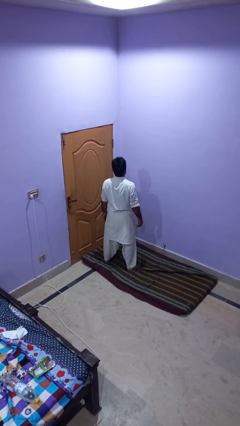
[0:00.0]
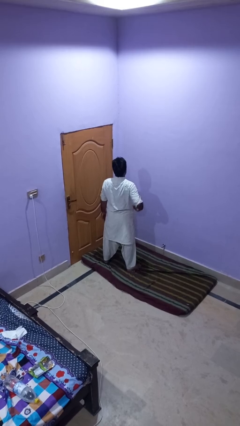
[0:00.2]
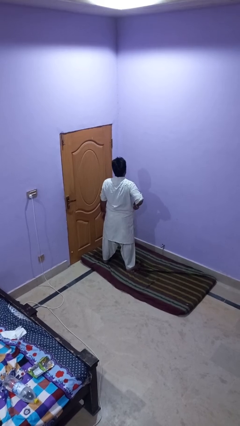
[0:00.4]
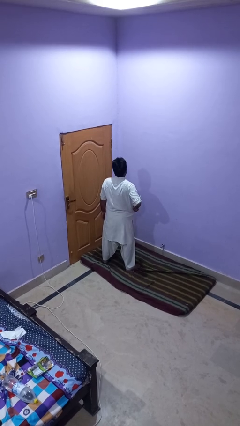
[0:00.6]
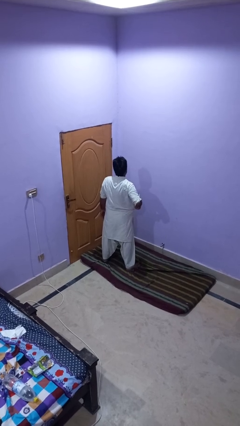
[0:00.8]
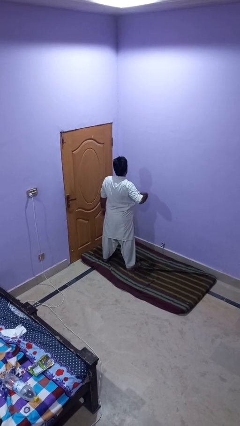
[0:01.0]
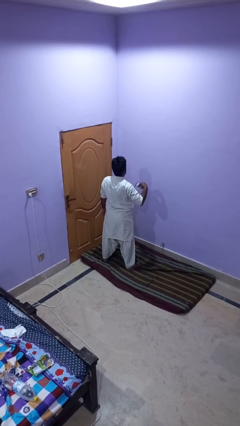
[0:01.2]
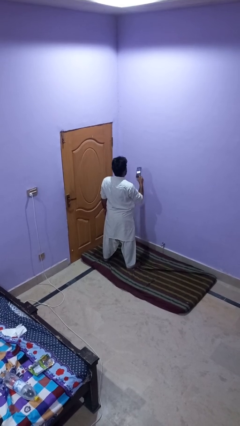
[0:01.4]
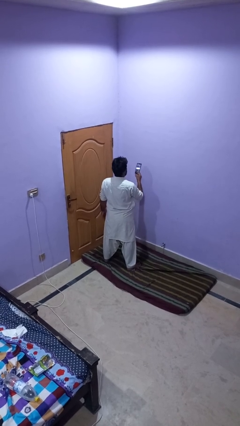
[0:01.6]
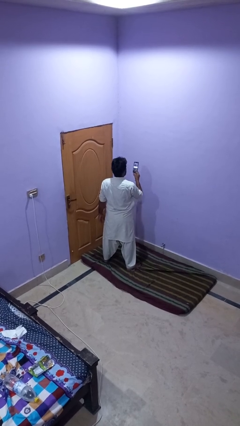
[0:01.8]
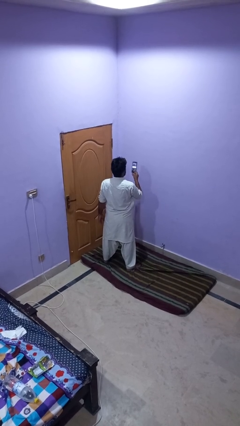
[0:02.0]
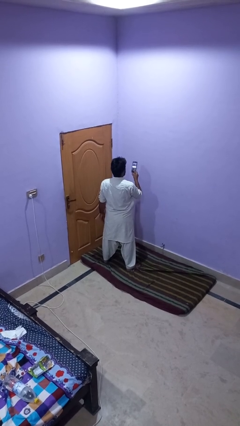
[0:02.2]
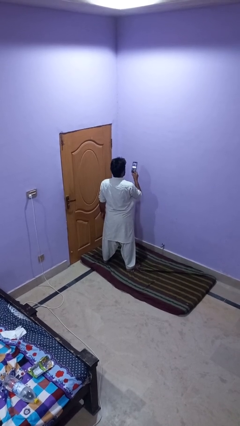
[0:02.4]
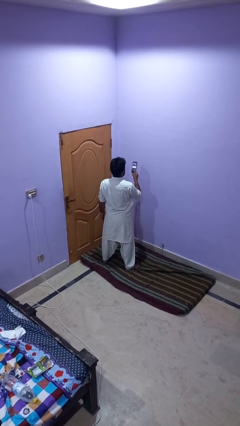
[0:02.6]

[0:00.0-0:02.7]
person takes phone from pocket

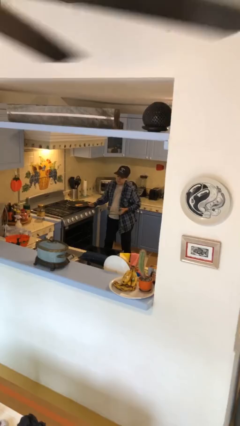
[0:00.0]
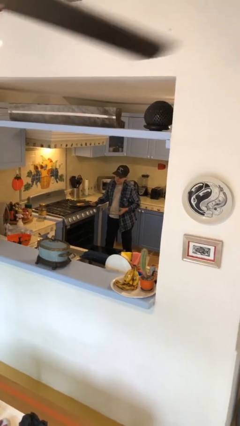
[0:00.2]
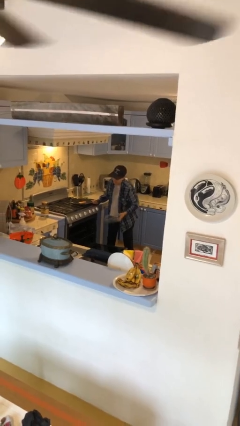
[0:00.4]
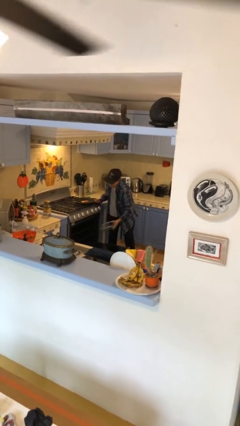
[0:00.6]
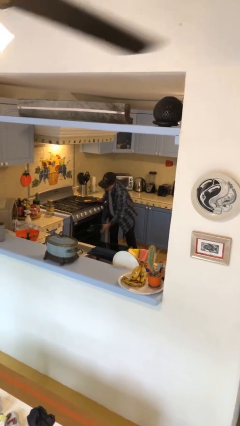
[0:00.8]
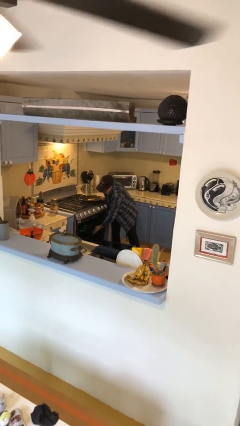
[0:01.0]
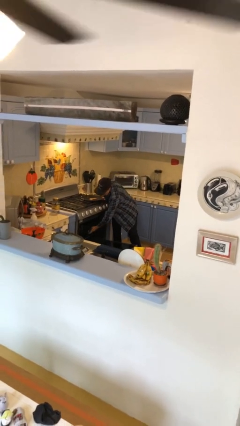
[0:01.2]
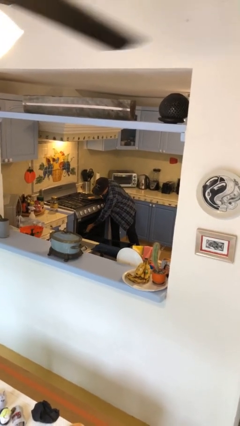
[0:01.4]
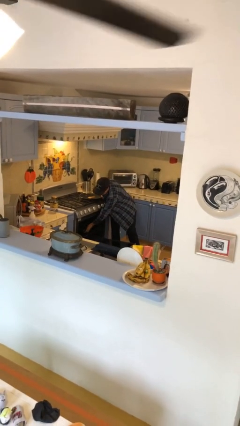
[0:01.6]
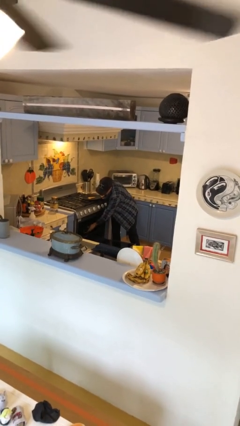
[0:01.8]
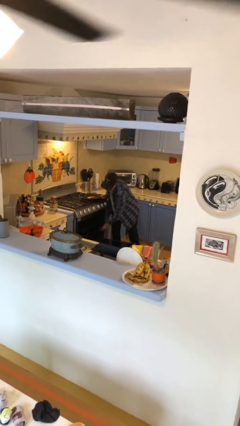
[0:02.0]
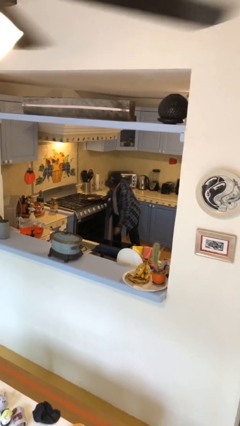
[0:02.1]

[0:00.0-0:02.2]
person puts object into oven

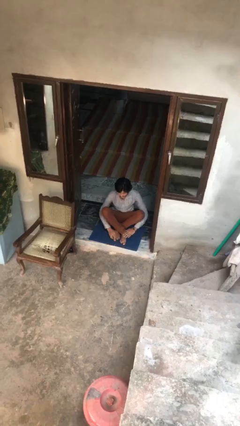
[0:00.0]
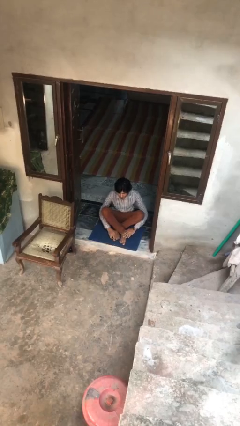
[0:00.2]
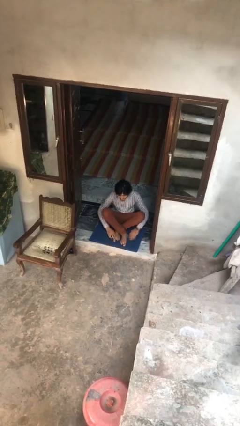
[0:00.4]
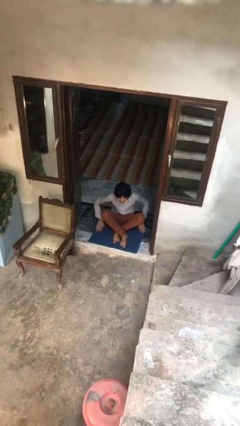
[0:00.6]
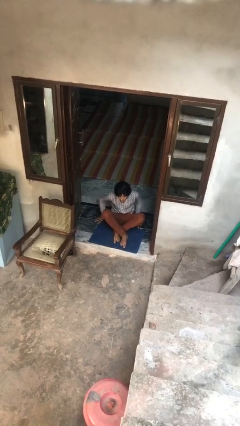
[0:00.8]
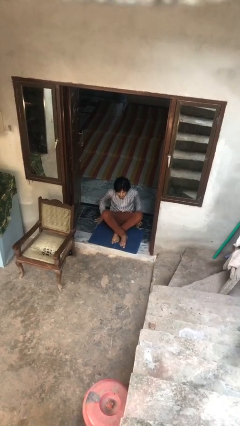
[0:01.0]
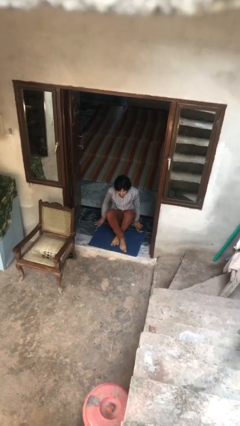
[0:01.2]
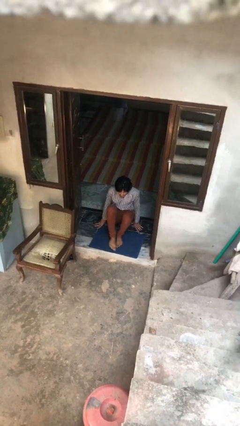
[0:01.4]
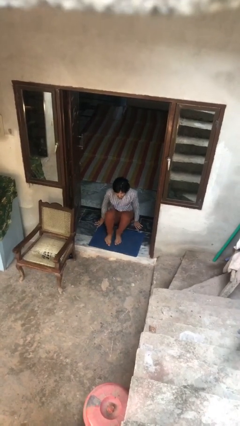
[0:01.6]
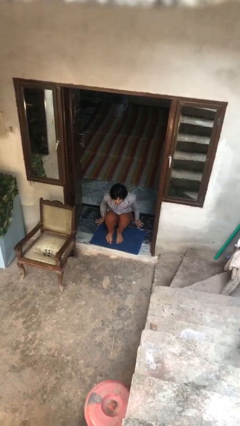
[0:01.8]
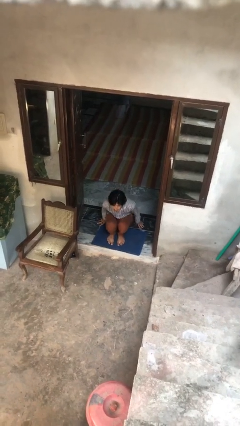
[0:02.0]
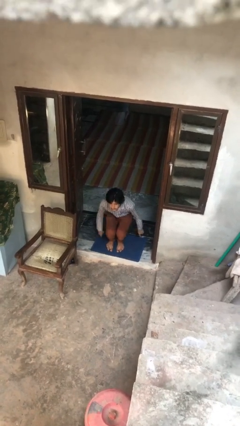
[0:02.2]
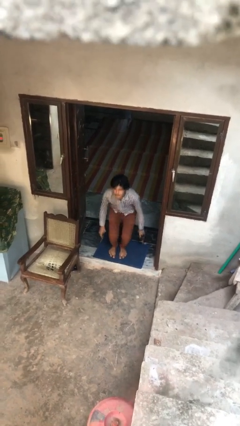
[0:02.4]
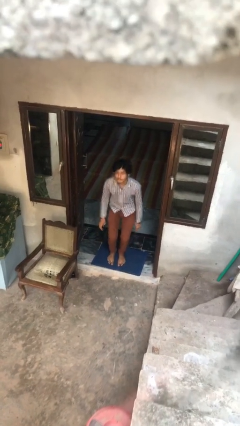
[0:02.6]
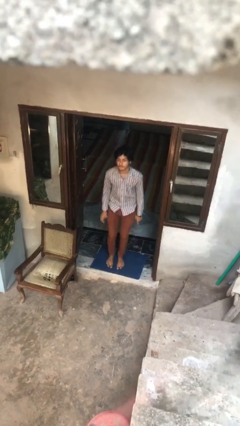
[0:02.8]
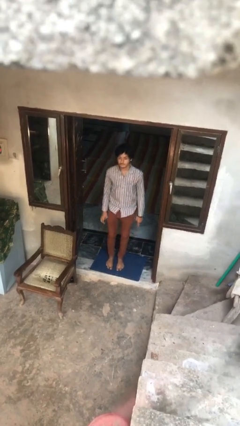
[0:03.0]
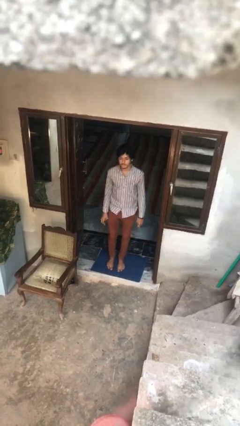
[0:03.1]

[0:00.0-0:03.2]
person stands up from floor

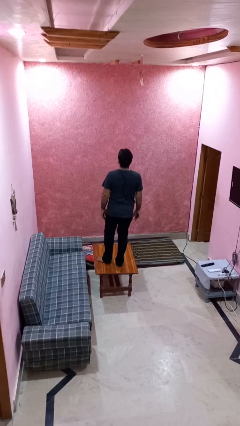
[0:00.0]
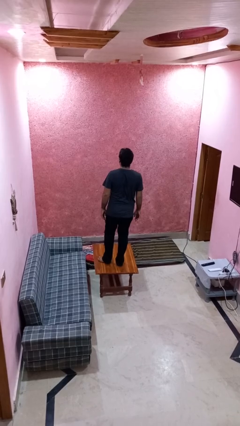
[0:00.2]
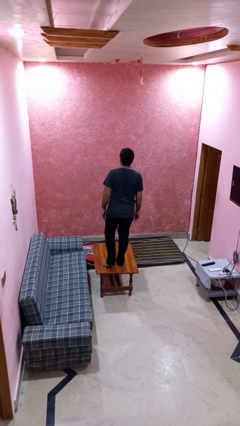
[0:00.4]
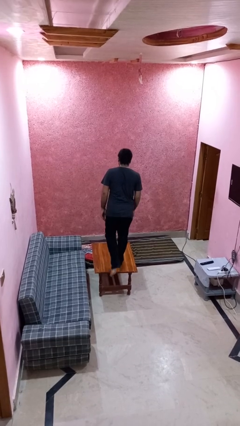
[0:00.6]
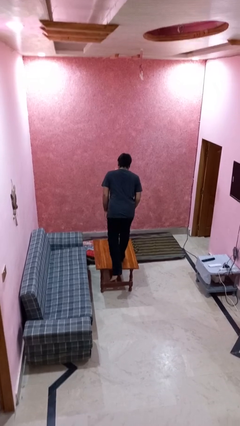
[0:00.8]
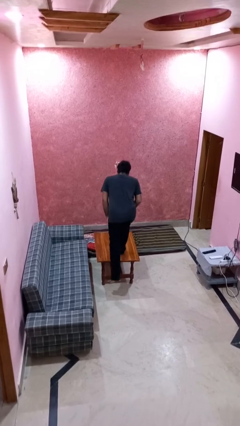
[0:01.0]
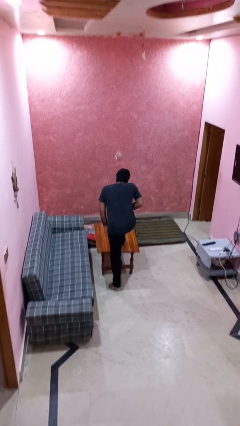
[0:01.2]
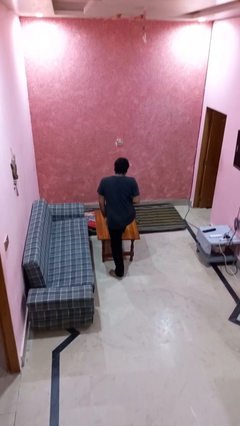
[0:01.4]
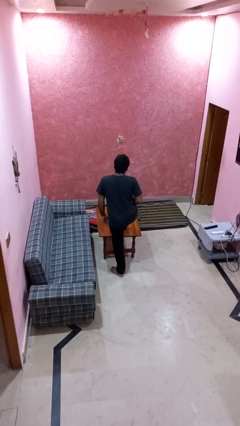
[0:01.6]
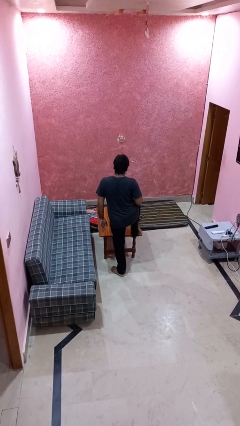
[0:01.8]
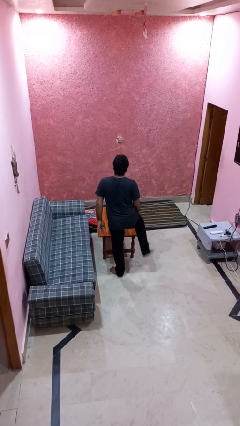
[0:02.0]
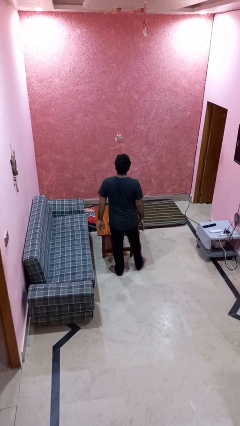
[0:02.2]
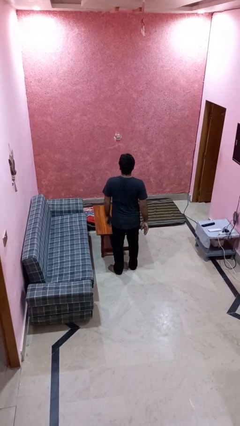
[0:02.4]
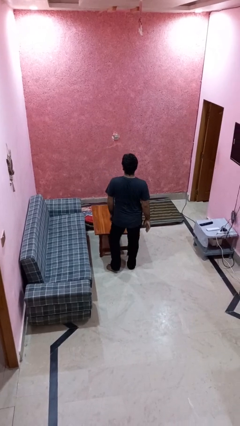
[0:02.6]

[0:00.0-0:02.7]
person climbs off table

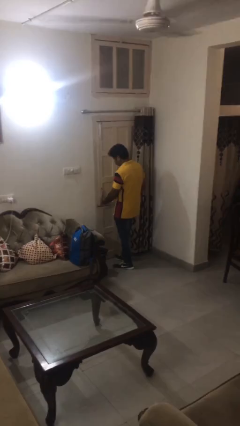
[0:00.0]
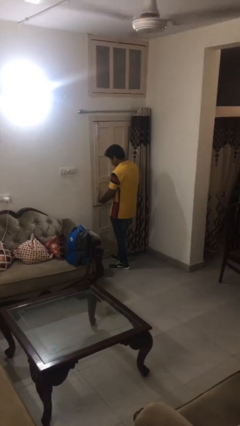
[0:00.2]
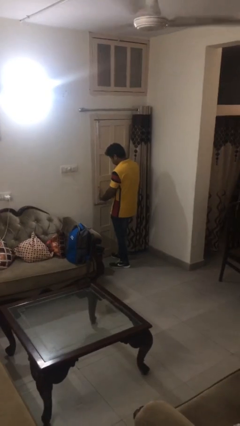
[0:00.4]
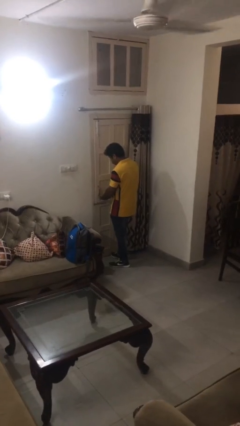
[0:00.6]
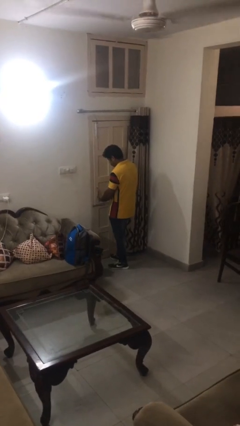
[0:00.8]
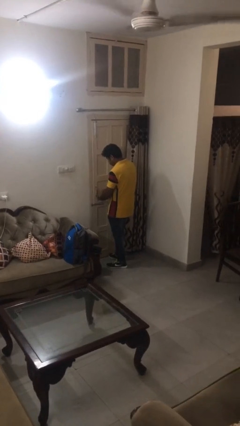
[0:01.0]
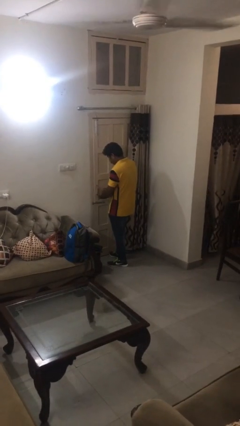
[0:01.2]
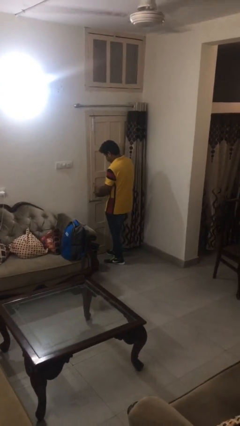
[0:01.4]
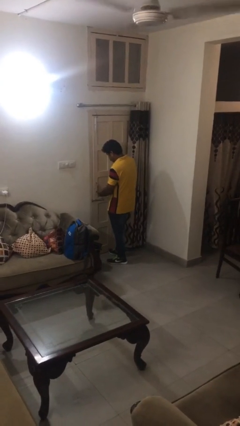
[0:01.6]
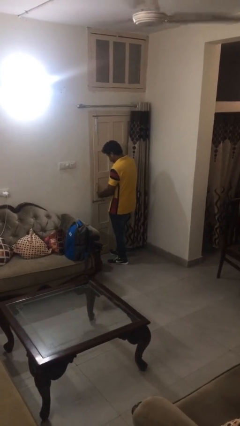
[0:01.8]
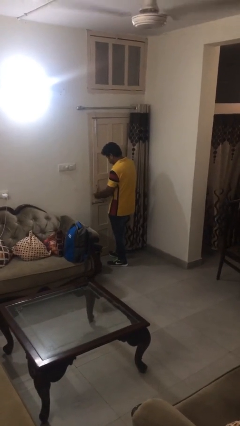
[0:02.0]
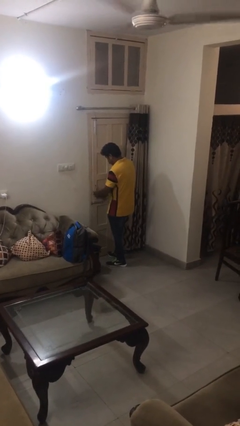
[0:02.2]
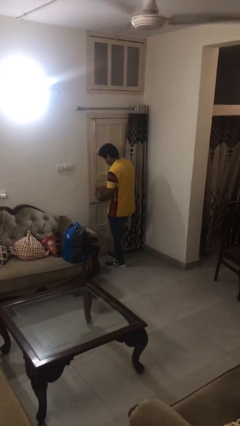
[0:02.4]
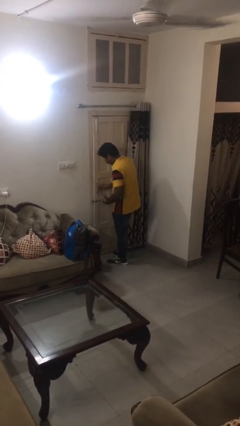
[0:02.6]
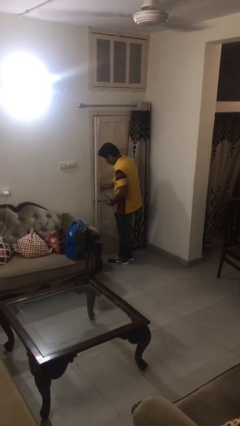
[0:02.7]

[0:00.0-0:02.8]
person unlocks door with keys

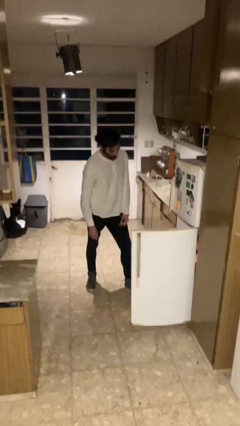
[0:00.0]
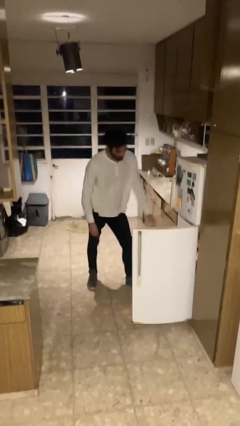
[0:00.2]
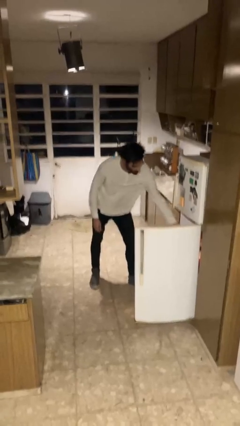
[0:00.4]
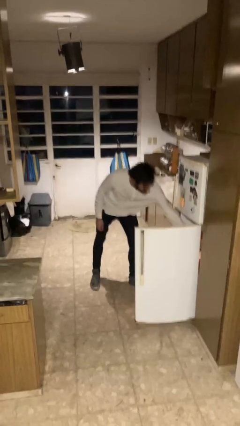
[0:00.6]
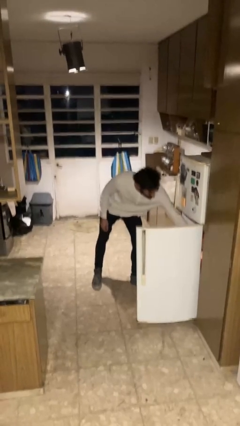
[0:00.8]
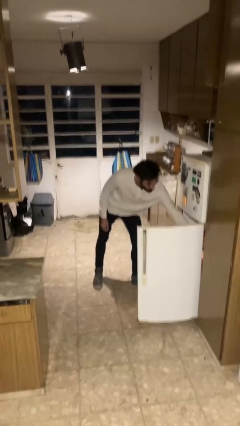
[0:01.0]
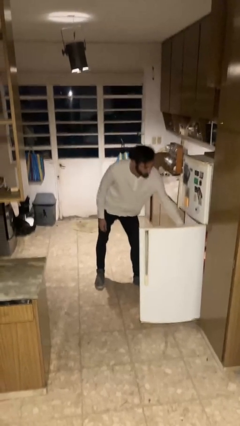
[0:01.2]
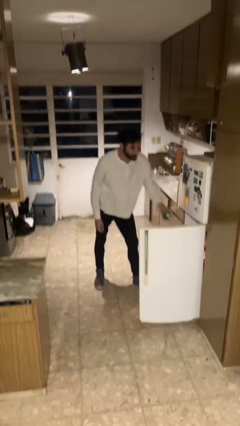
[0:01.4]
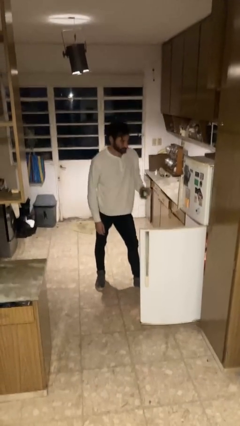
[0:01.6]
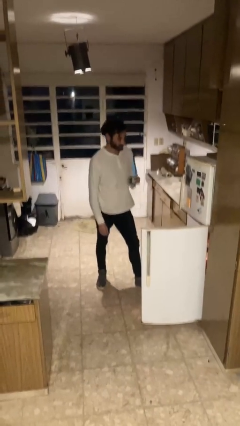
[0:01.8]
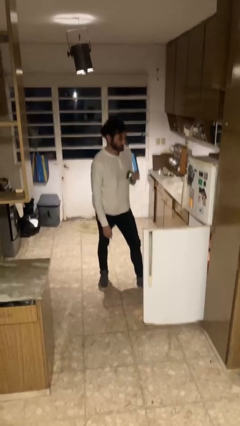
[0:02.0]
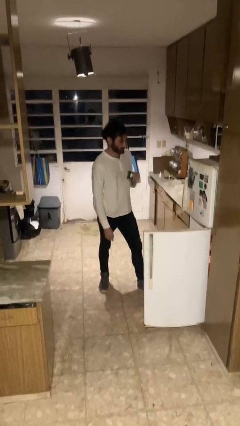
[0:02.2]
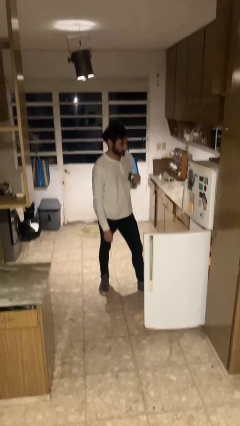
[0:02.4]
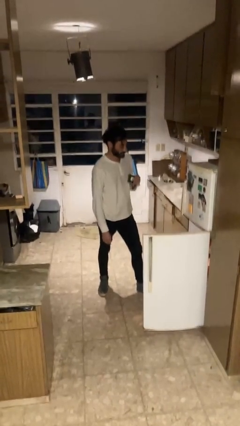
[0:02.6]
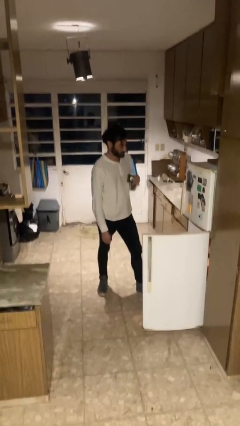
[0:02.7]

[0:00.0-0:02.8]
person takes object from refrigerator

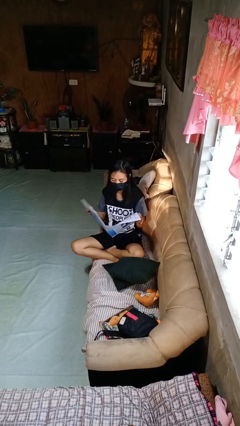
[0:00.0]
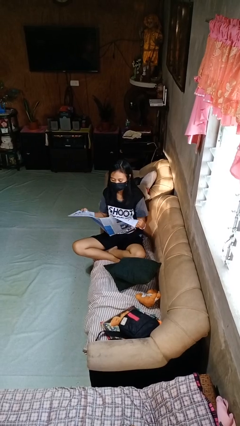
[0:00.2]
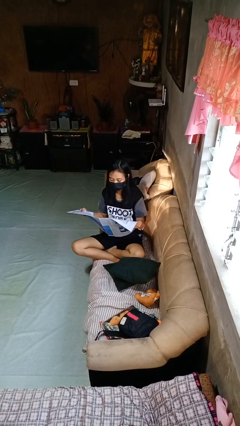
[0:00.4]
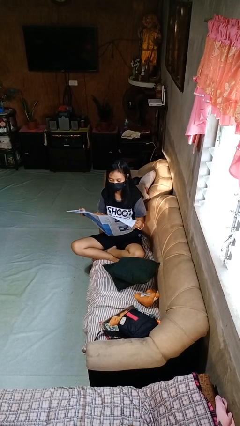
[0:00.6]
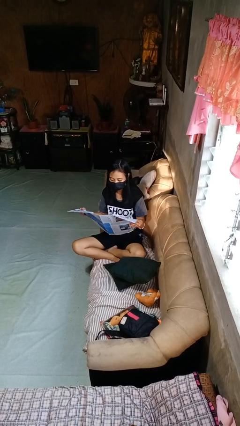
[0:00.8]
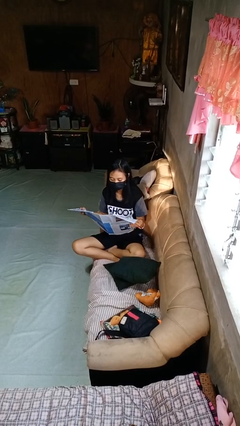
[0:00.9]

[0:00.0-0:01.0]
person reads newspaper

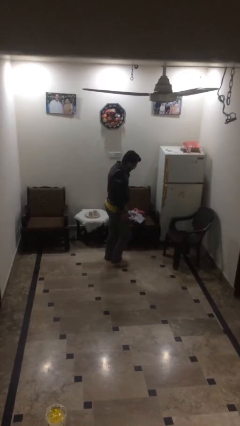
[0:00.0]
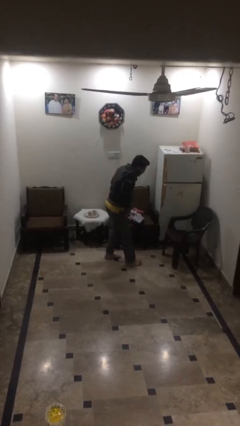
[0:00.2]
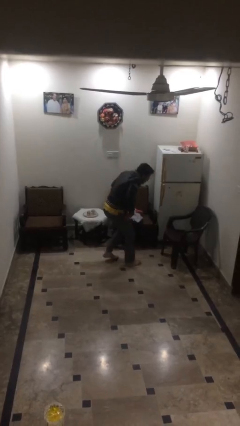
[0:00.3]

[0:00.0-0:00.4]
person sits down
